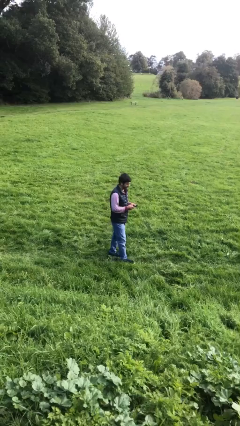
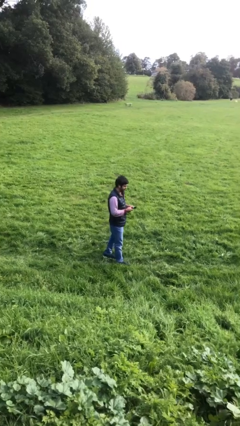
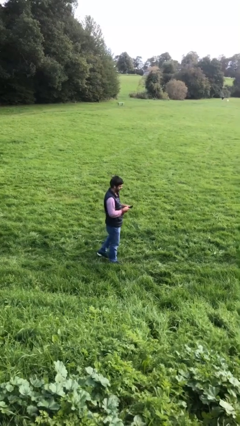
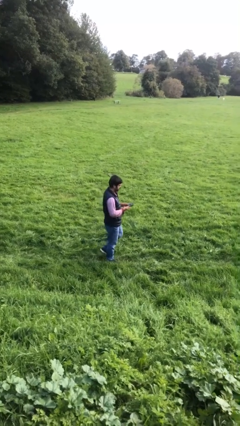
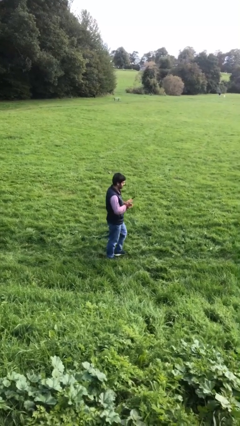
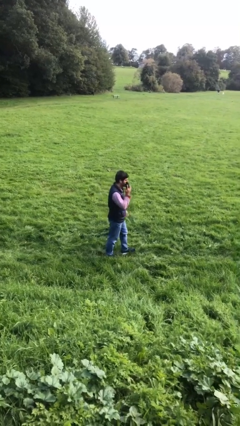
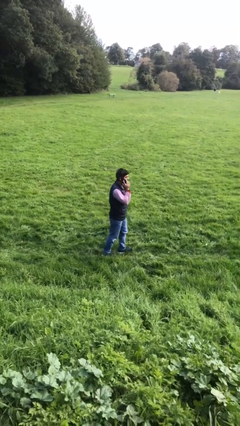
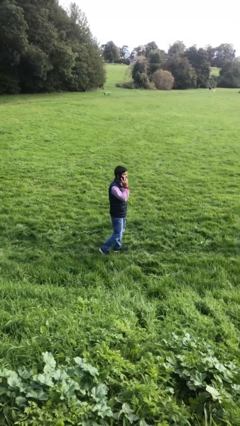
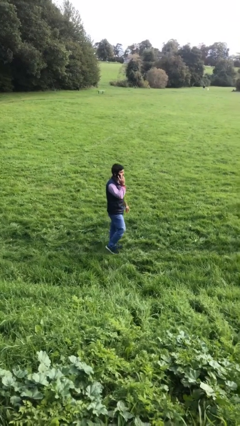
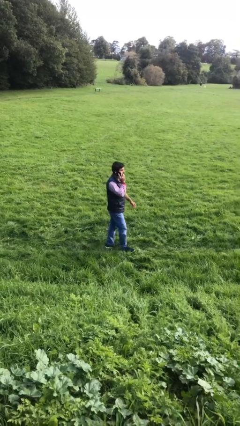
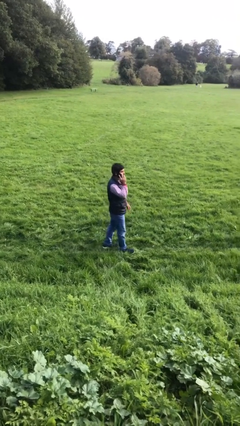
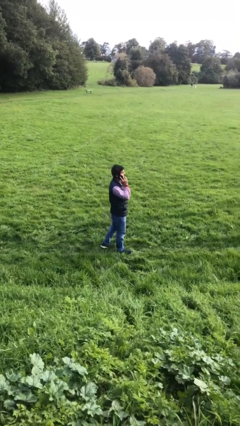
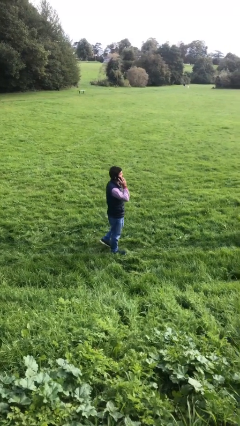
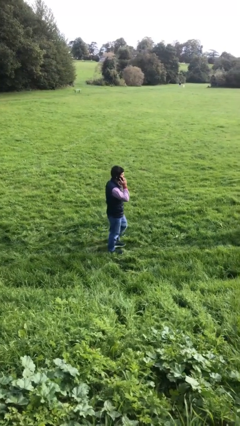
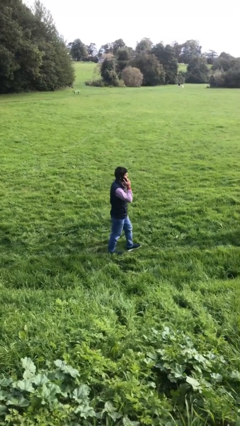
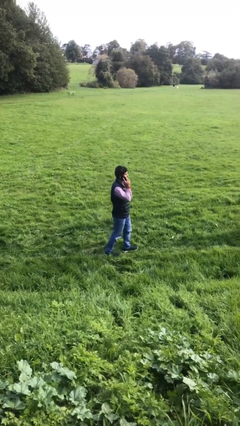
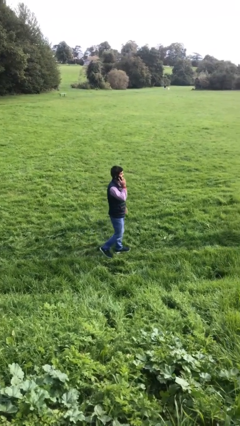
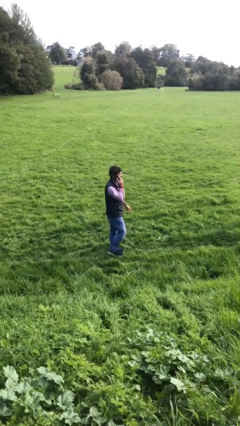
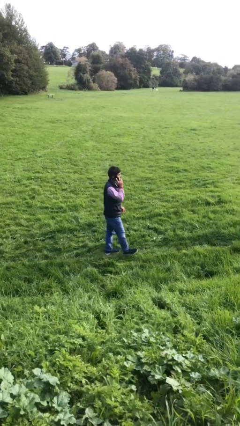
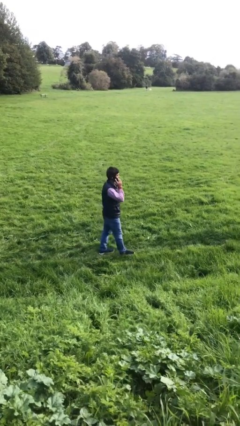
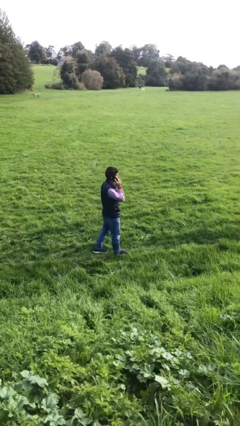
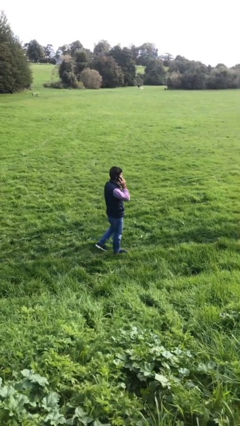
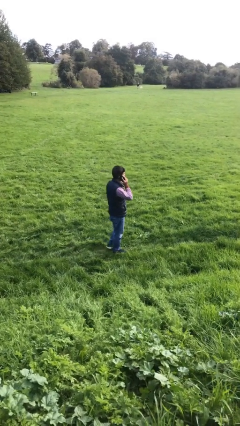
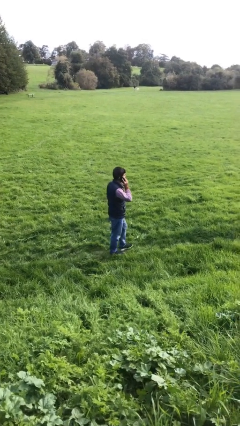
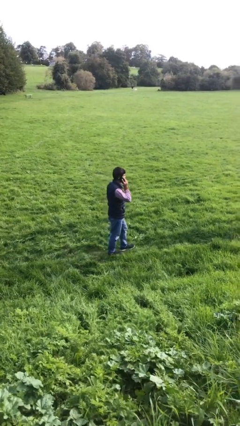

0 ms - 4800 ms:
person talks on phone

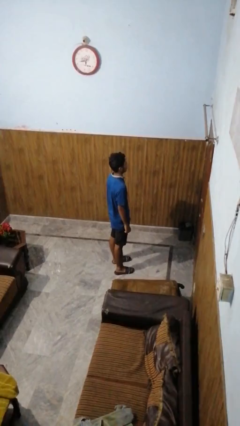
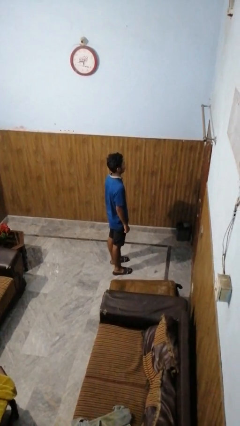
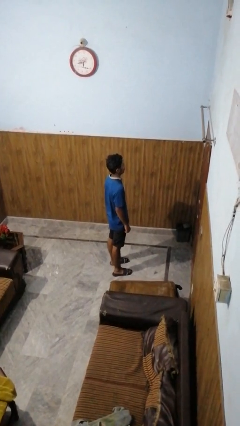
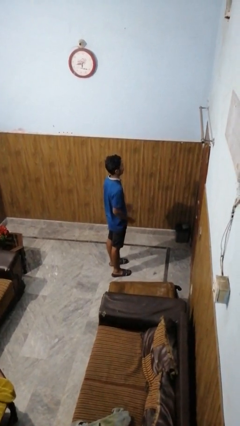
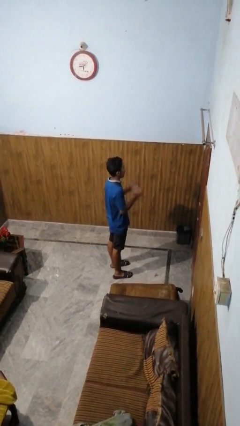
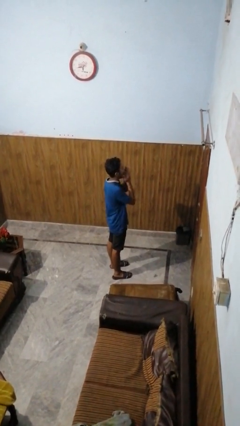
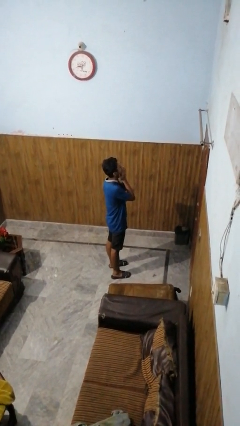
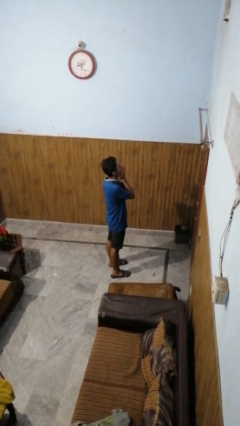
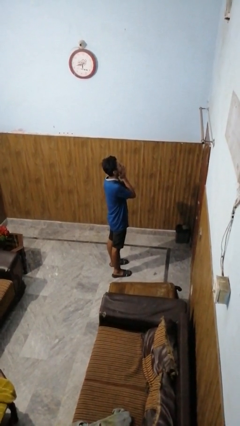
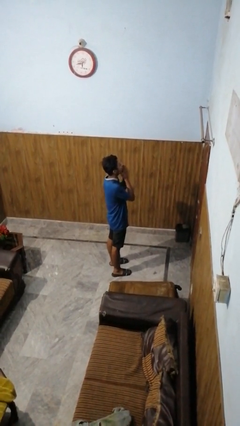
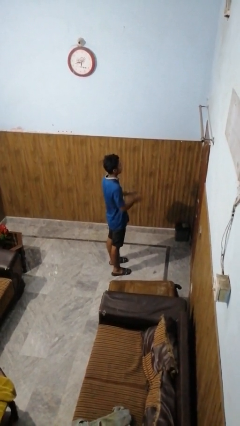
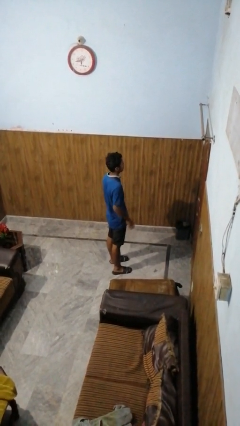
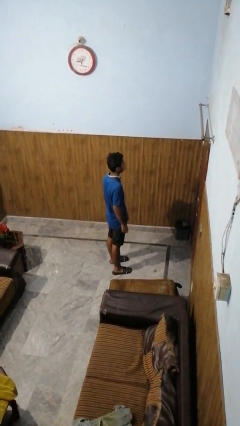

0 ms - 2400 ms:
person covers face with hands

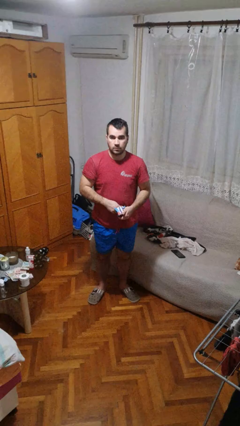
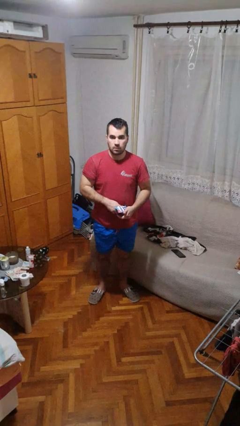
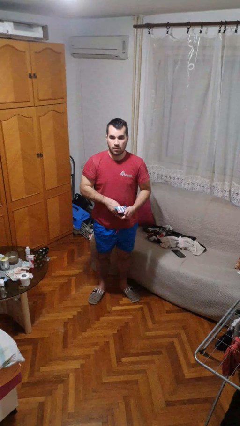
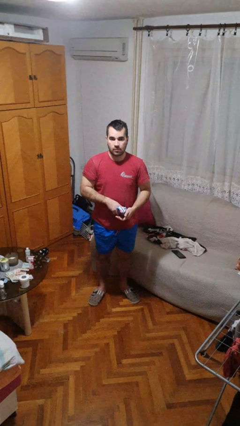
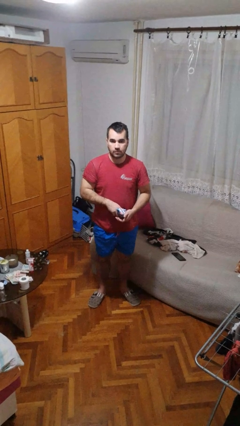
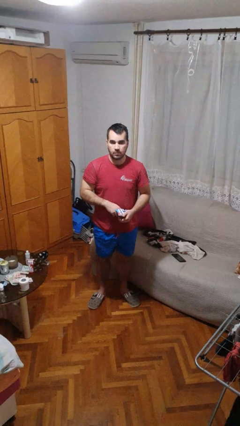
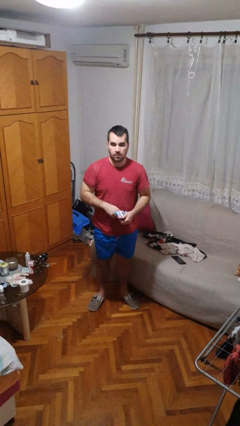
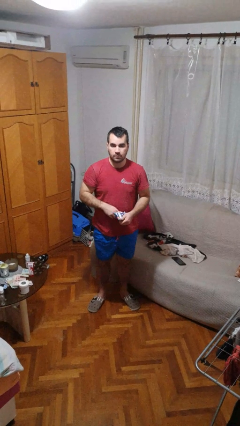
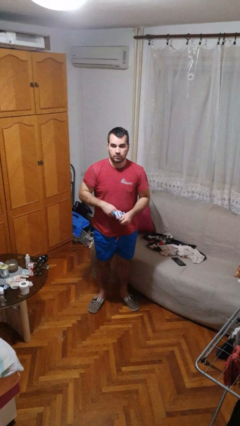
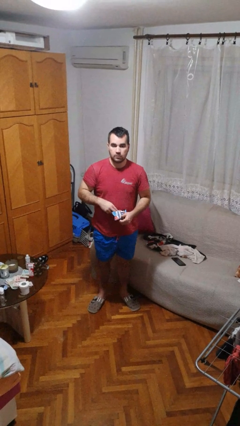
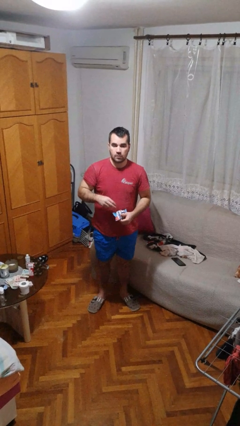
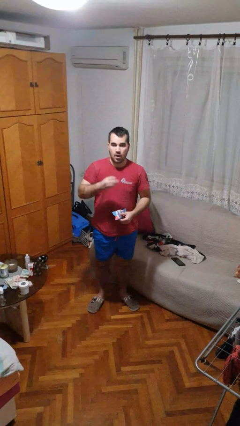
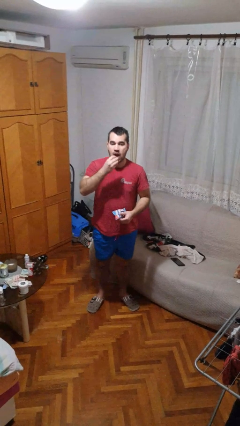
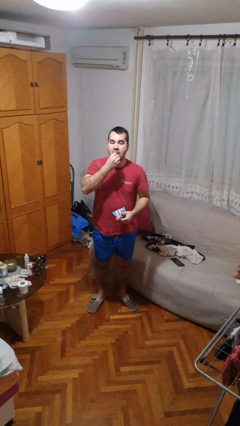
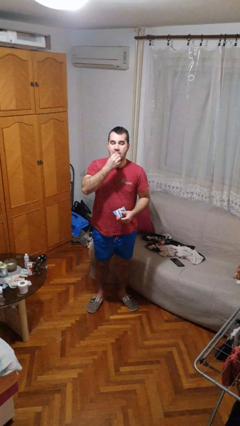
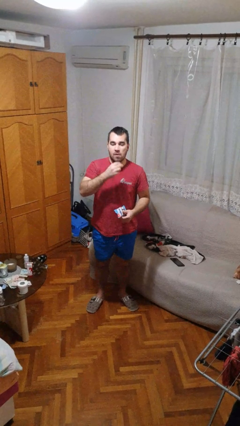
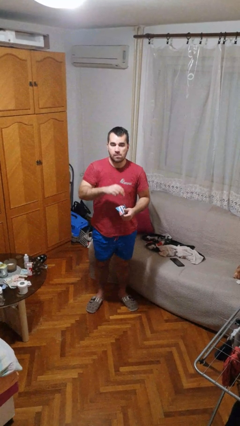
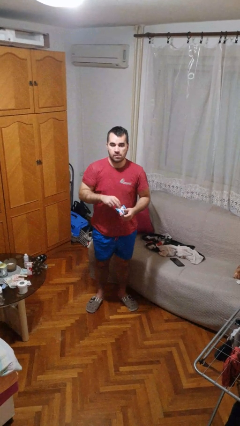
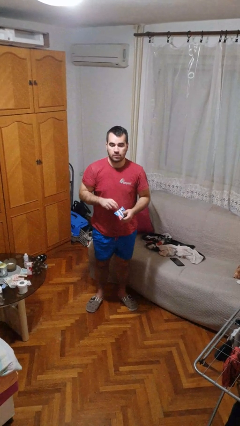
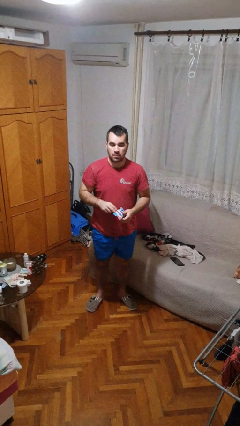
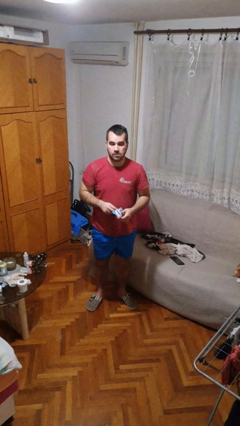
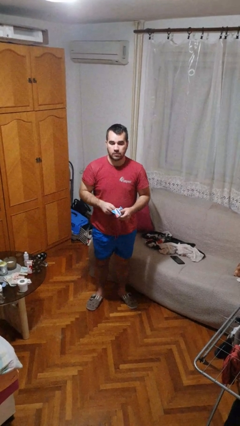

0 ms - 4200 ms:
person eats snack from bag

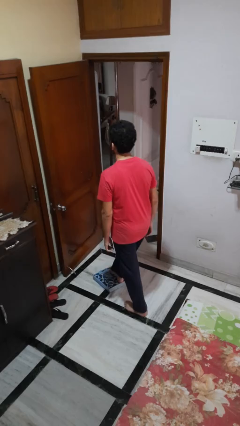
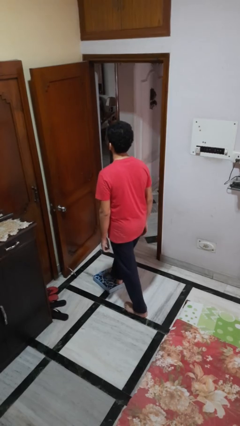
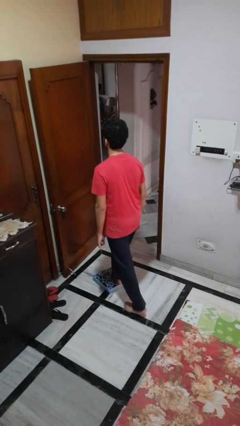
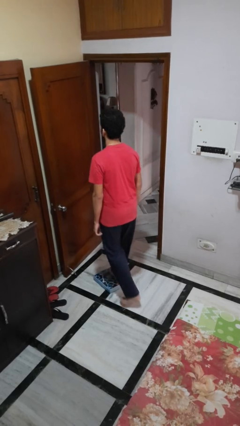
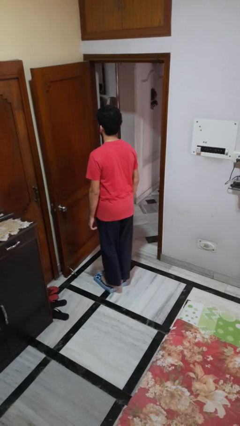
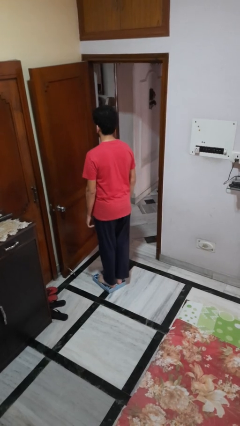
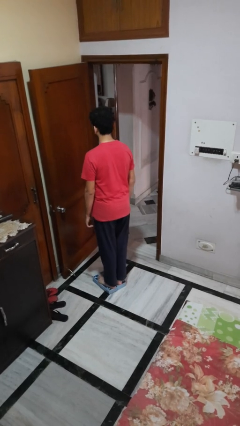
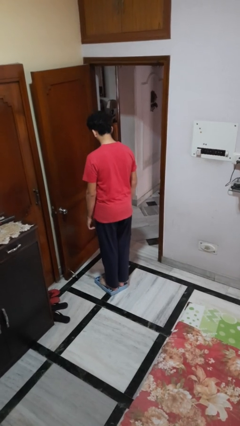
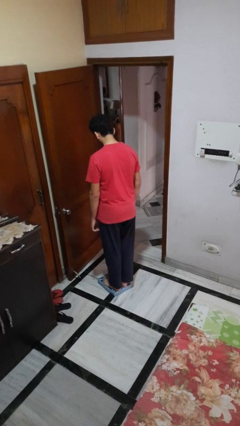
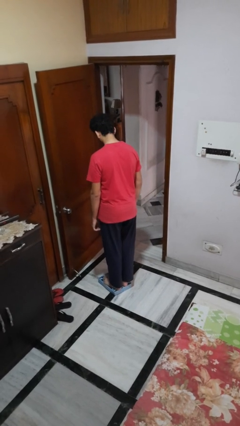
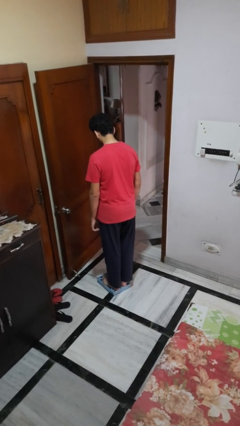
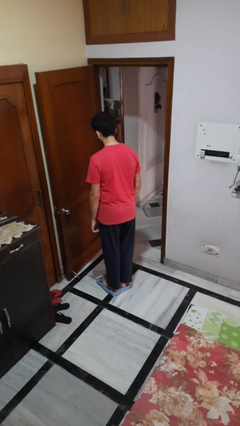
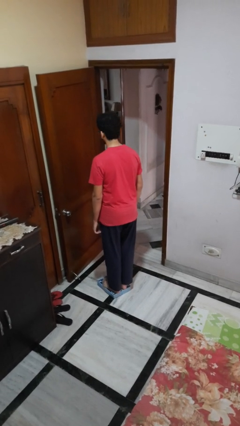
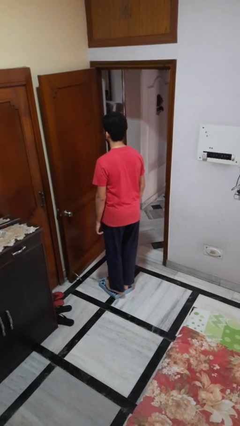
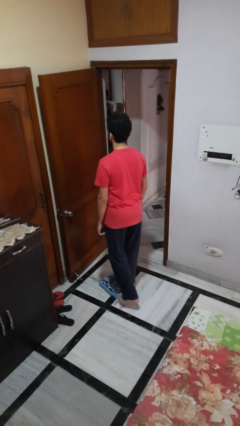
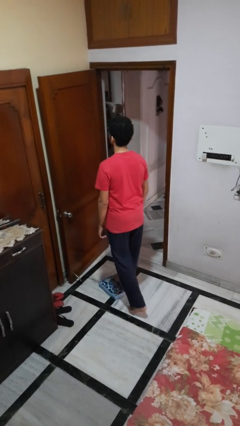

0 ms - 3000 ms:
person uses bodyweight scale

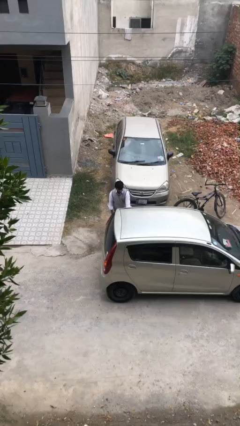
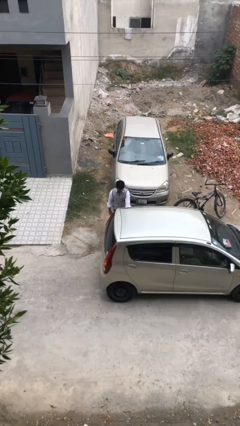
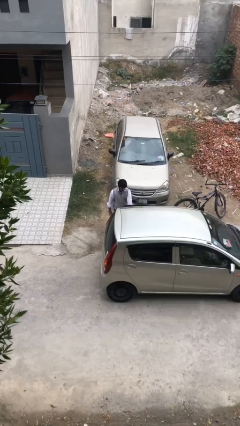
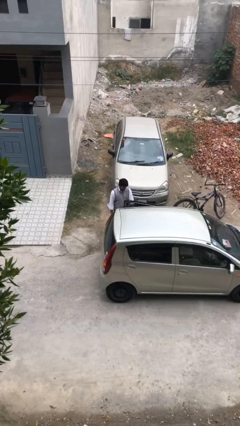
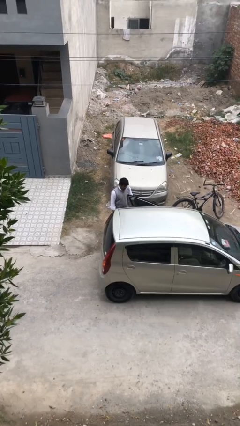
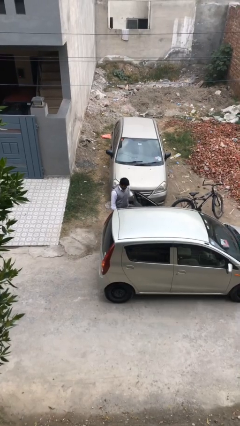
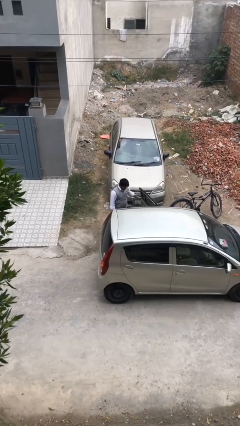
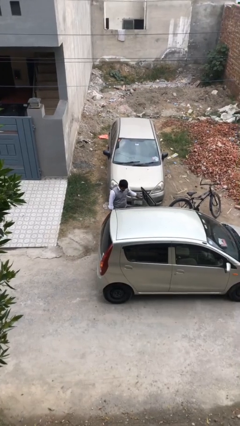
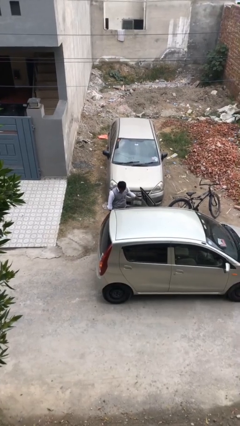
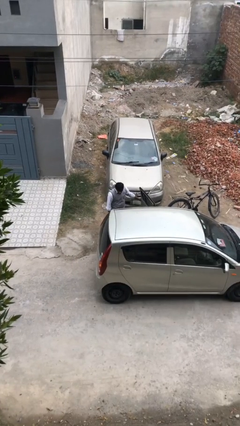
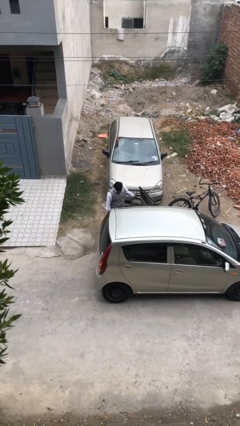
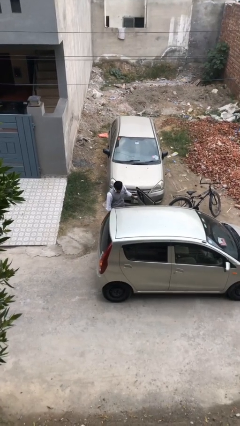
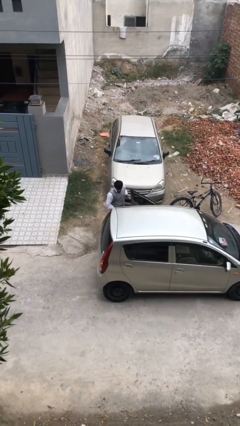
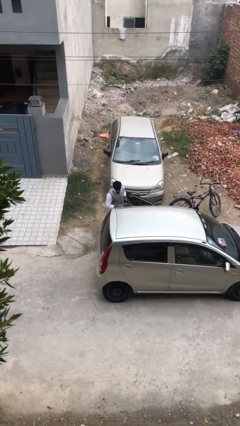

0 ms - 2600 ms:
person opens car door

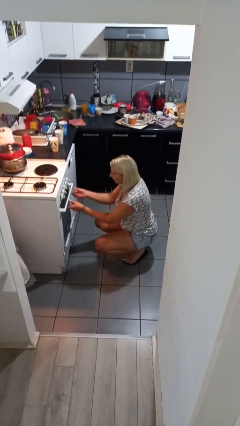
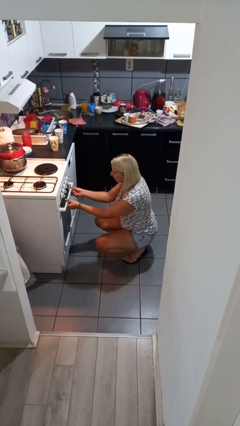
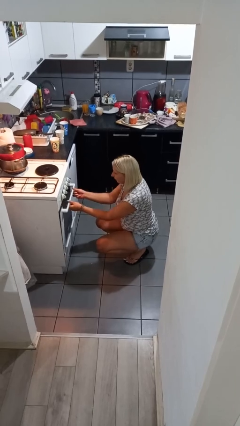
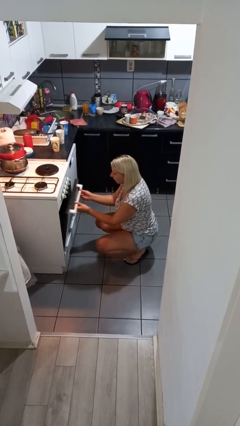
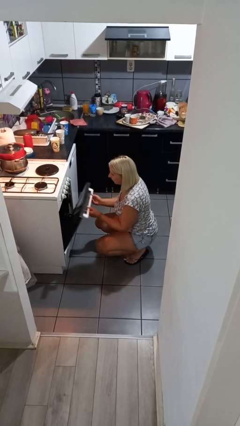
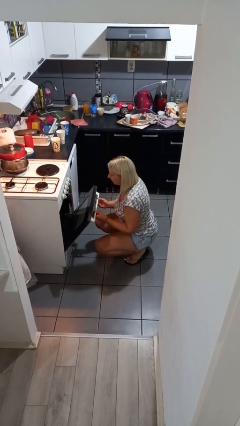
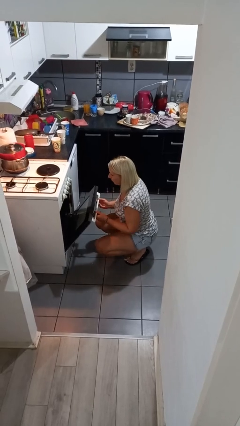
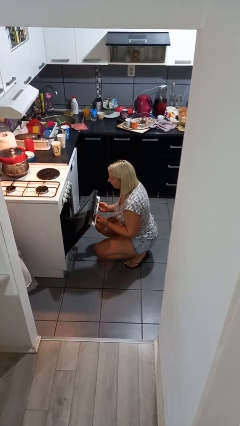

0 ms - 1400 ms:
person opens oven door
